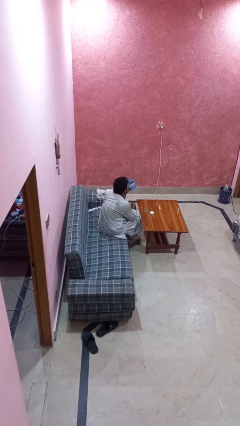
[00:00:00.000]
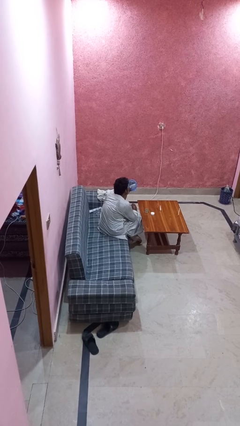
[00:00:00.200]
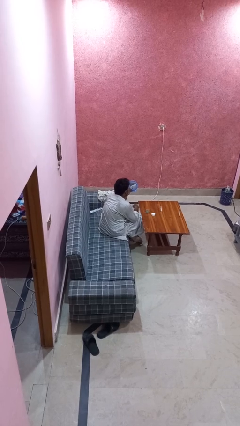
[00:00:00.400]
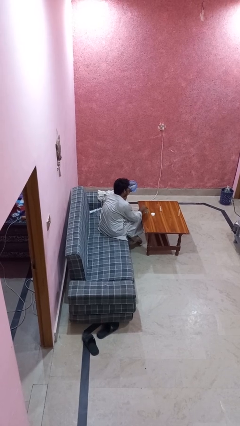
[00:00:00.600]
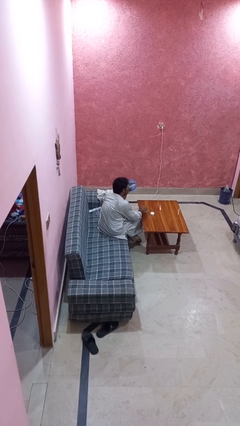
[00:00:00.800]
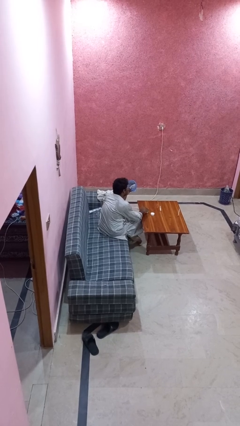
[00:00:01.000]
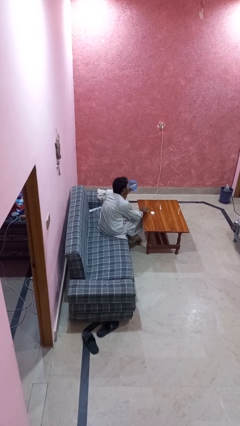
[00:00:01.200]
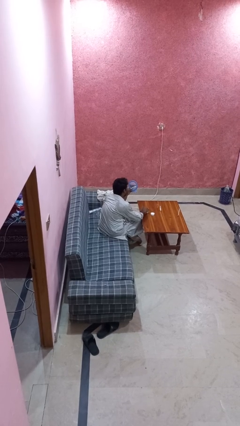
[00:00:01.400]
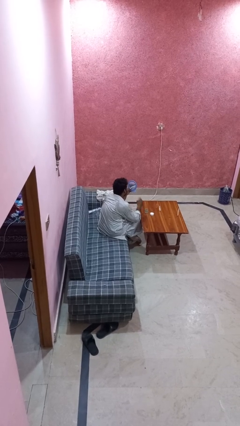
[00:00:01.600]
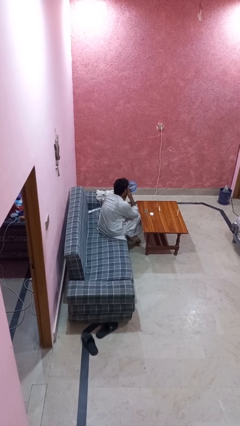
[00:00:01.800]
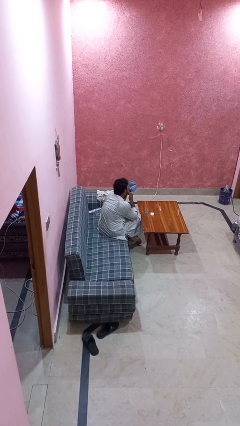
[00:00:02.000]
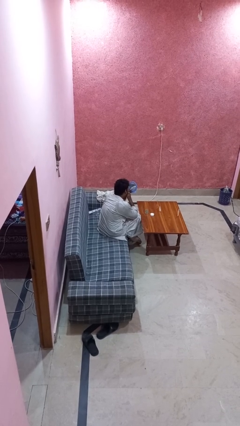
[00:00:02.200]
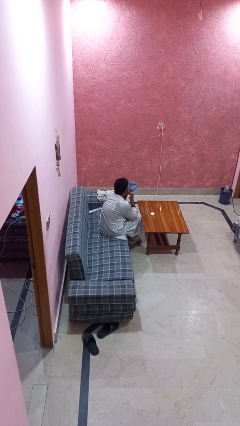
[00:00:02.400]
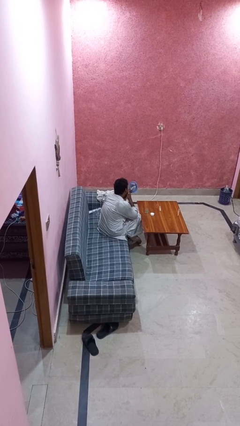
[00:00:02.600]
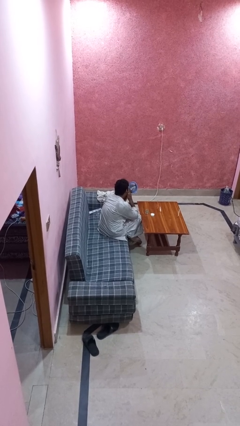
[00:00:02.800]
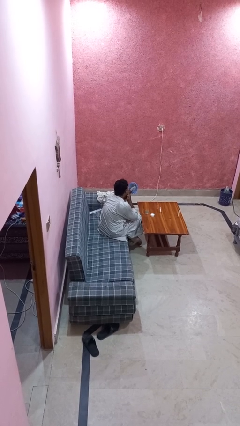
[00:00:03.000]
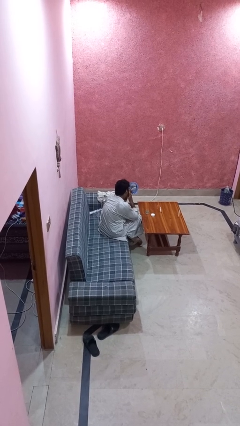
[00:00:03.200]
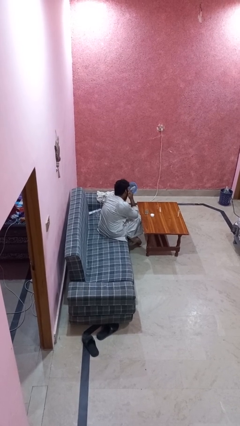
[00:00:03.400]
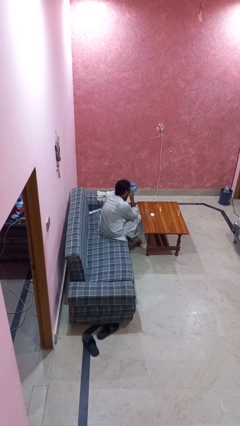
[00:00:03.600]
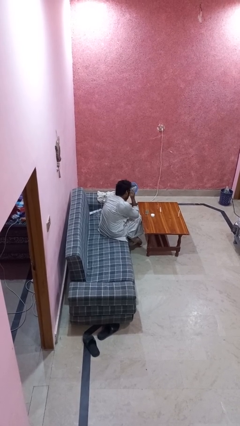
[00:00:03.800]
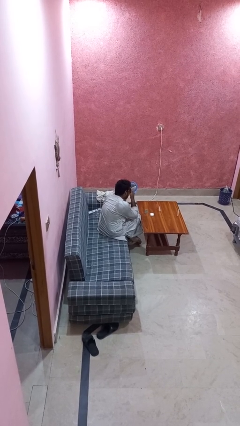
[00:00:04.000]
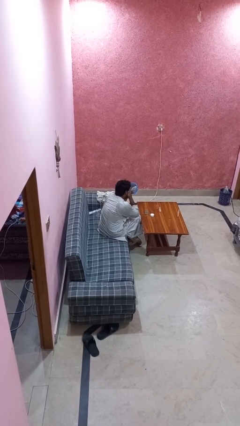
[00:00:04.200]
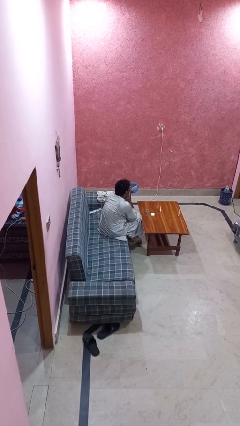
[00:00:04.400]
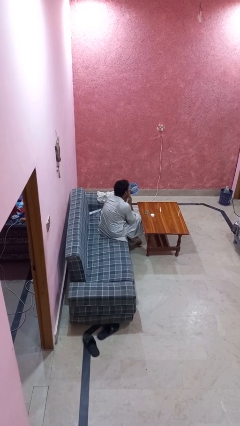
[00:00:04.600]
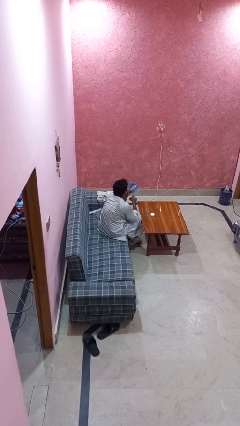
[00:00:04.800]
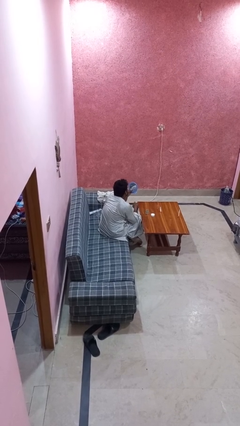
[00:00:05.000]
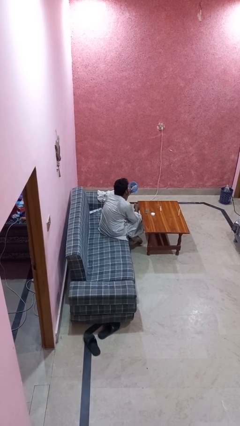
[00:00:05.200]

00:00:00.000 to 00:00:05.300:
person applies foundation makeup

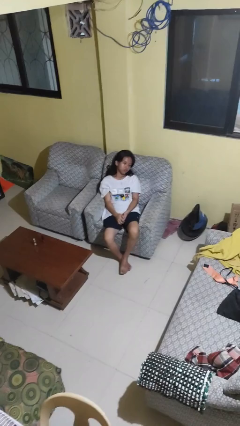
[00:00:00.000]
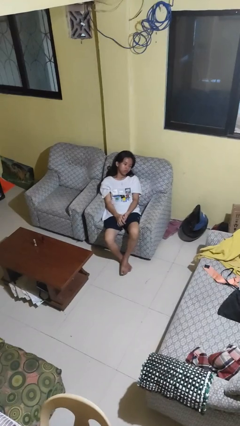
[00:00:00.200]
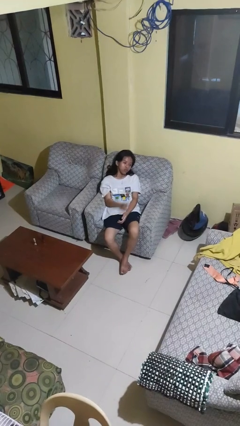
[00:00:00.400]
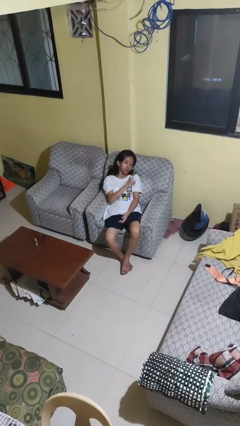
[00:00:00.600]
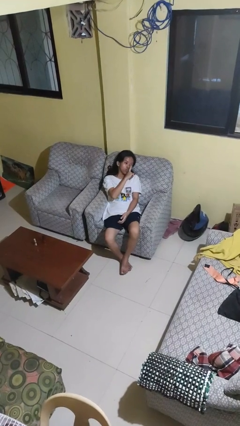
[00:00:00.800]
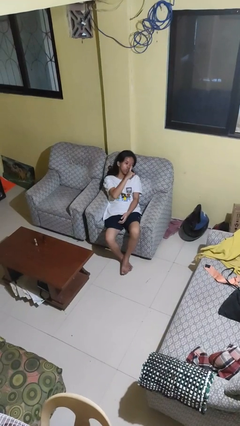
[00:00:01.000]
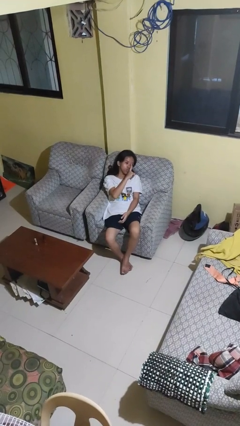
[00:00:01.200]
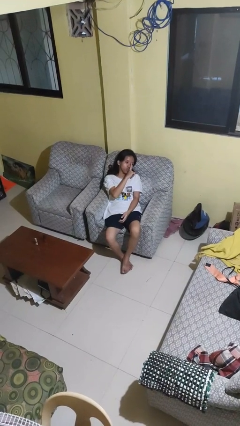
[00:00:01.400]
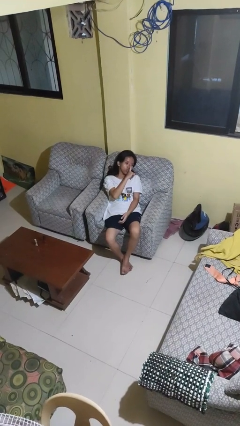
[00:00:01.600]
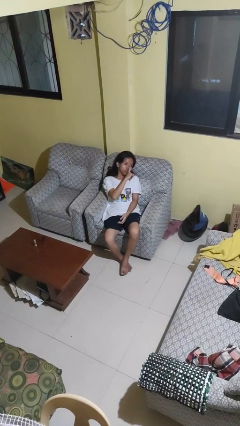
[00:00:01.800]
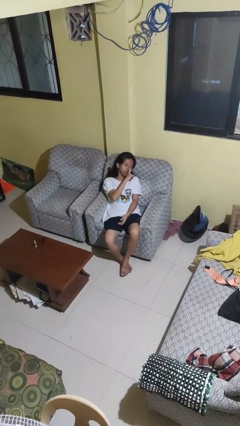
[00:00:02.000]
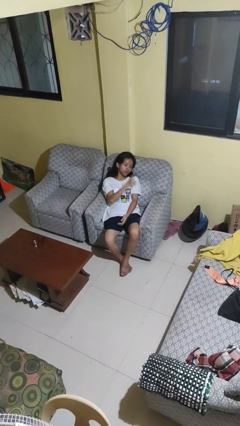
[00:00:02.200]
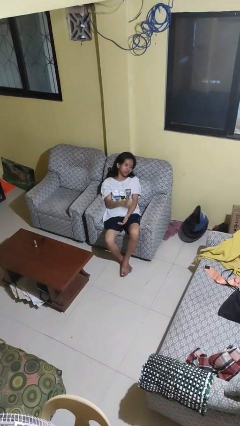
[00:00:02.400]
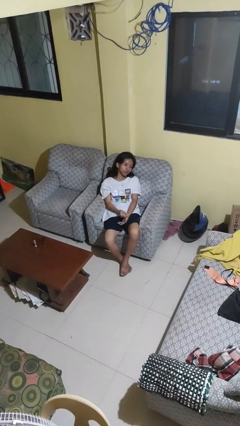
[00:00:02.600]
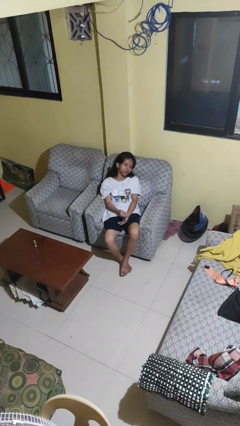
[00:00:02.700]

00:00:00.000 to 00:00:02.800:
person gestures be quiet

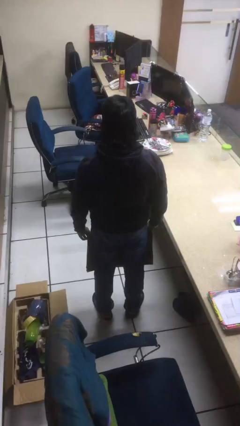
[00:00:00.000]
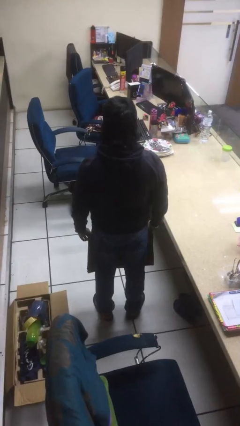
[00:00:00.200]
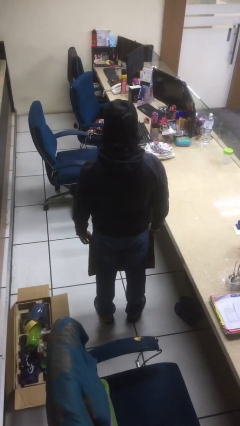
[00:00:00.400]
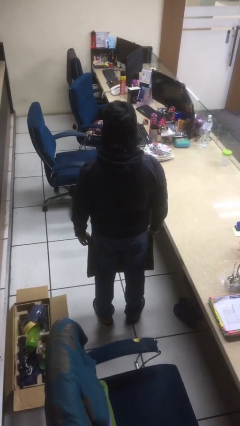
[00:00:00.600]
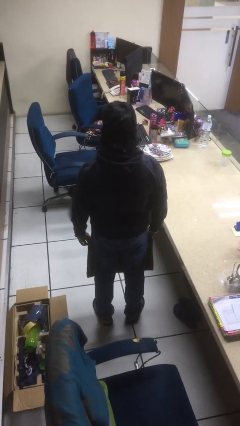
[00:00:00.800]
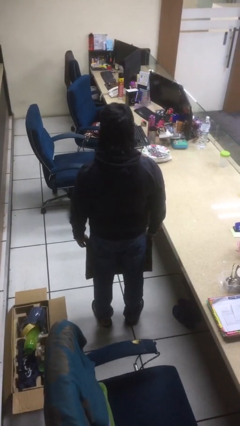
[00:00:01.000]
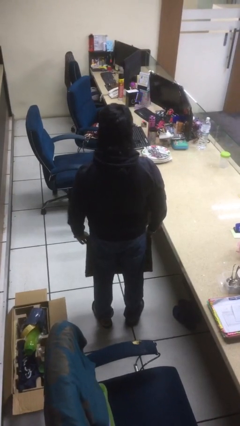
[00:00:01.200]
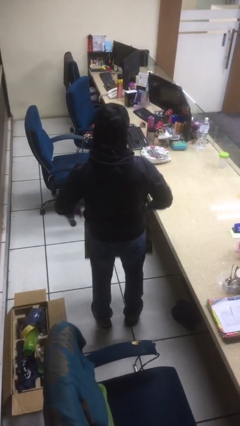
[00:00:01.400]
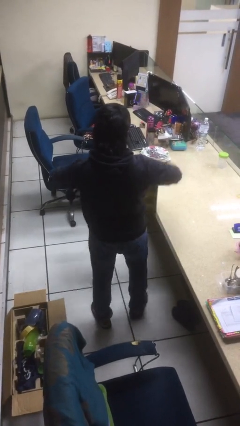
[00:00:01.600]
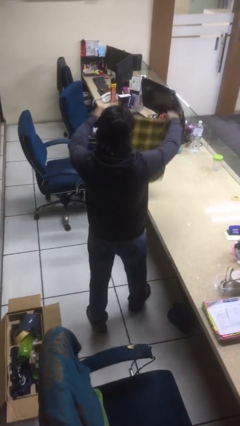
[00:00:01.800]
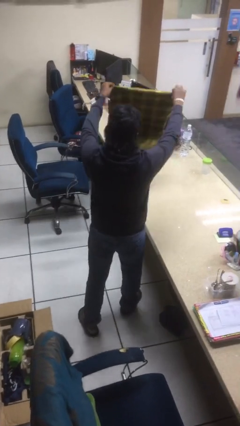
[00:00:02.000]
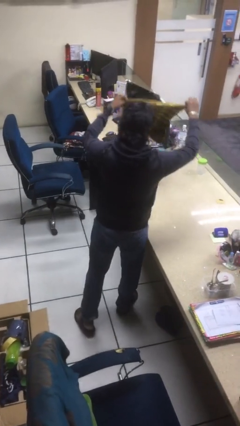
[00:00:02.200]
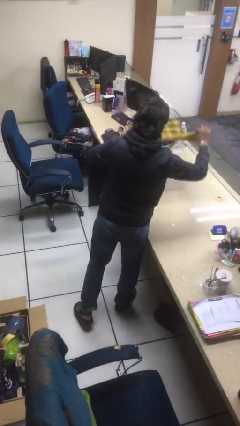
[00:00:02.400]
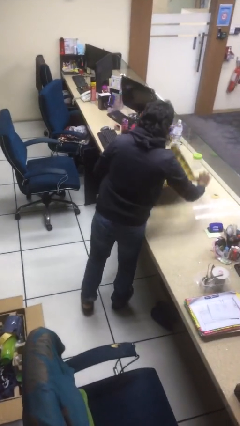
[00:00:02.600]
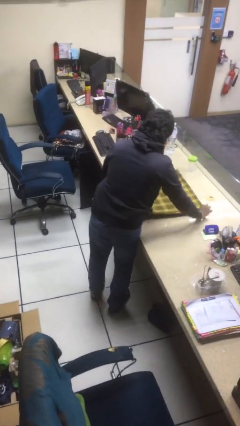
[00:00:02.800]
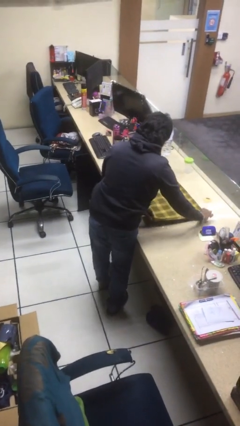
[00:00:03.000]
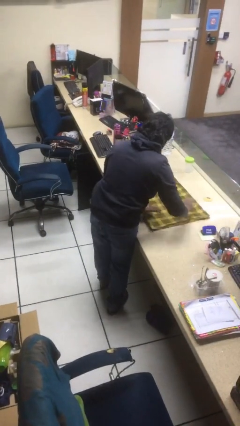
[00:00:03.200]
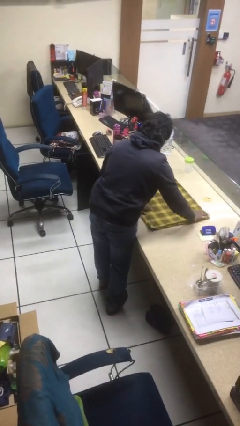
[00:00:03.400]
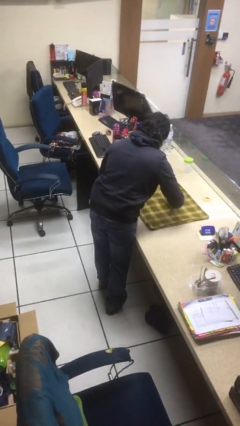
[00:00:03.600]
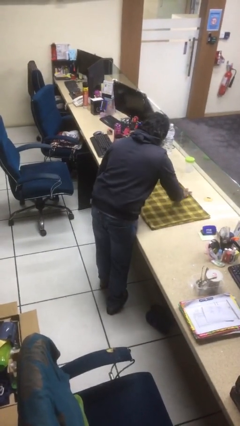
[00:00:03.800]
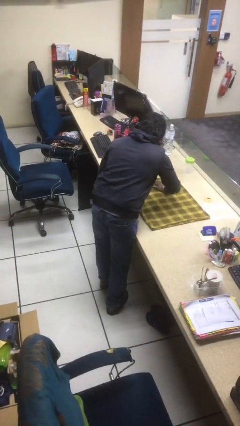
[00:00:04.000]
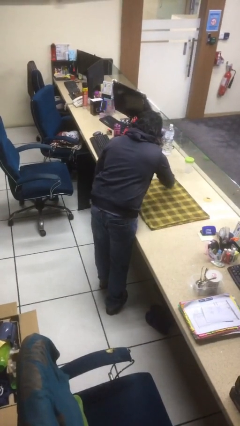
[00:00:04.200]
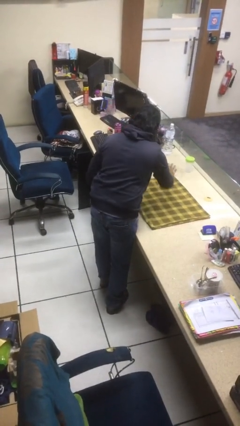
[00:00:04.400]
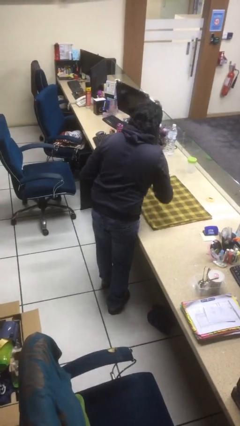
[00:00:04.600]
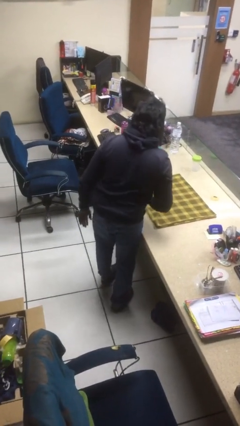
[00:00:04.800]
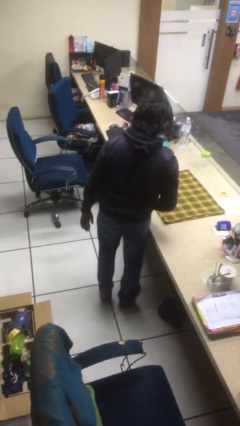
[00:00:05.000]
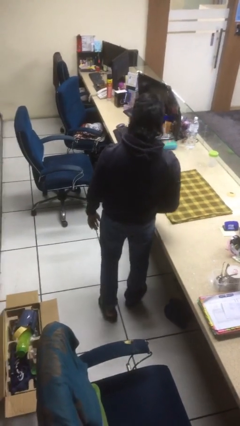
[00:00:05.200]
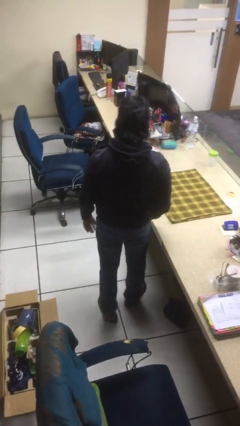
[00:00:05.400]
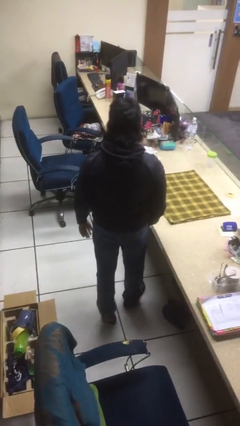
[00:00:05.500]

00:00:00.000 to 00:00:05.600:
person spreads tablecloth

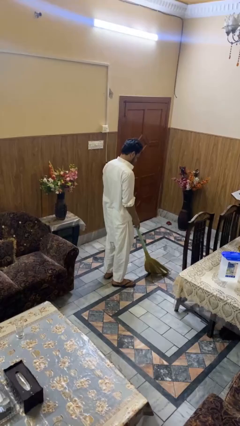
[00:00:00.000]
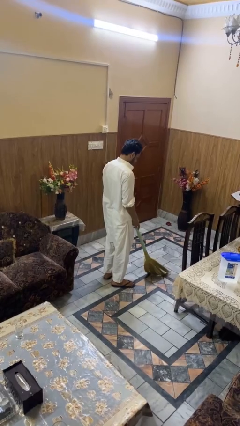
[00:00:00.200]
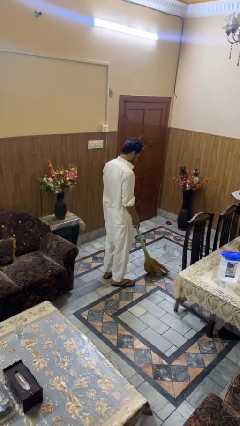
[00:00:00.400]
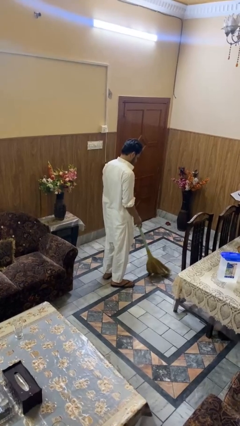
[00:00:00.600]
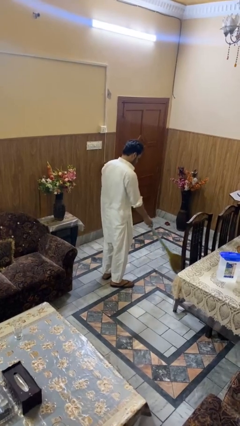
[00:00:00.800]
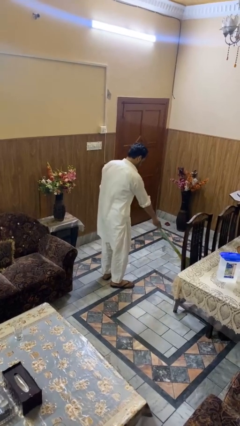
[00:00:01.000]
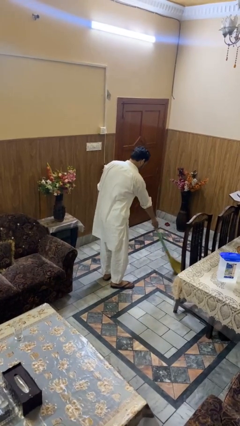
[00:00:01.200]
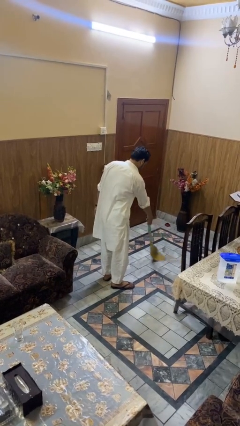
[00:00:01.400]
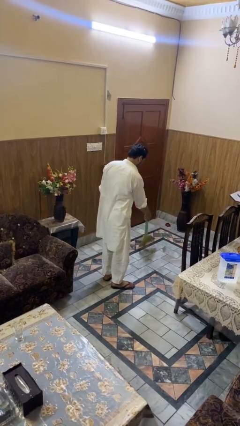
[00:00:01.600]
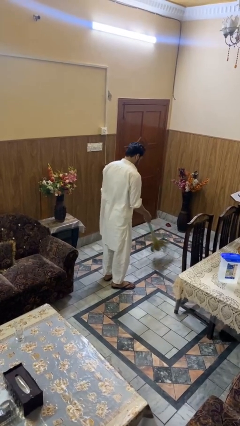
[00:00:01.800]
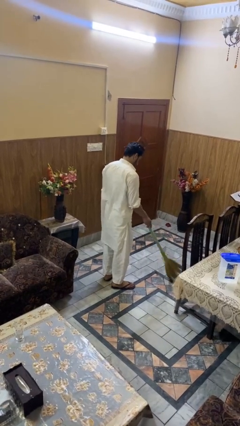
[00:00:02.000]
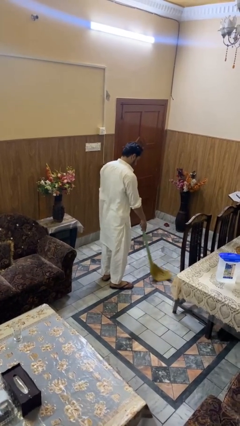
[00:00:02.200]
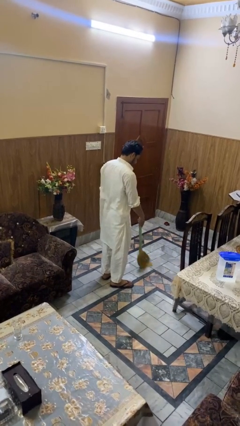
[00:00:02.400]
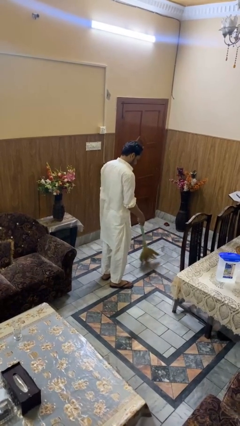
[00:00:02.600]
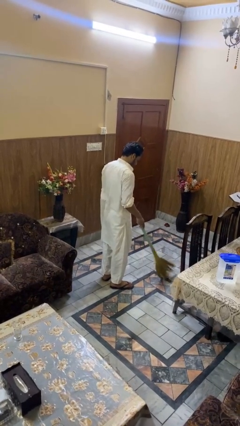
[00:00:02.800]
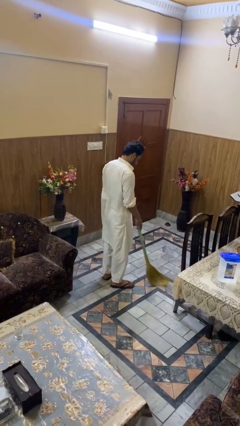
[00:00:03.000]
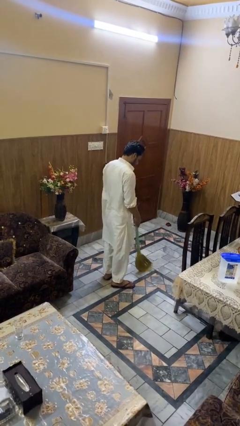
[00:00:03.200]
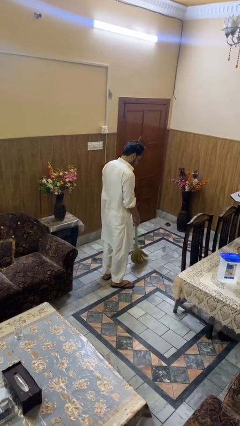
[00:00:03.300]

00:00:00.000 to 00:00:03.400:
person sweeps floor
